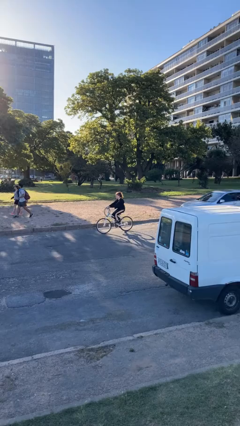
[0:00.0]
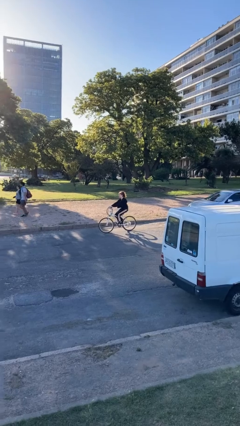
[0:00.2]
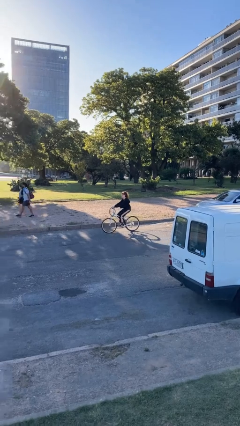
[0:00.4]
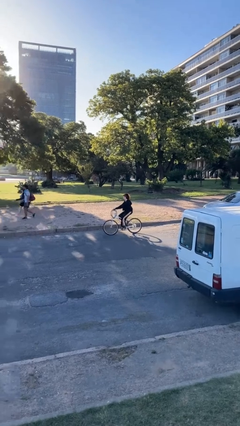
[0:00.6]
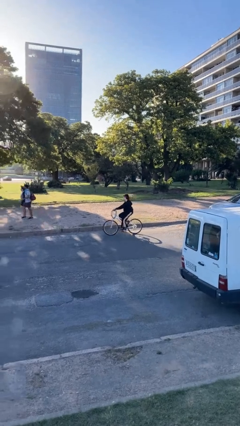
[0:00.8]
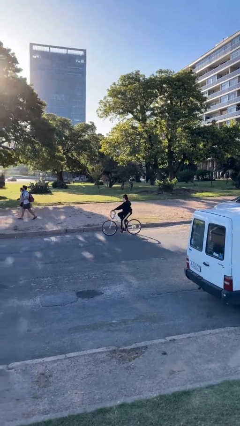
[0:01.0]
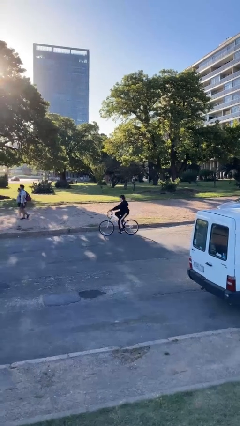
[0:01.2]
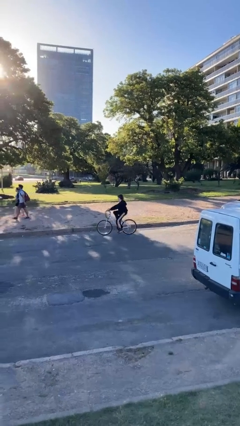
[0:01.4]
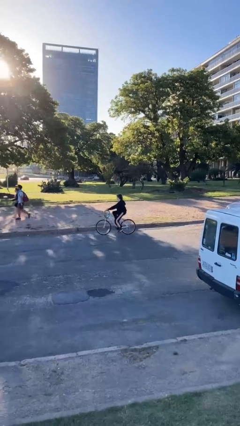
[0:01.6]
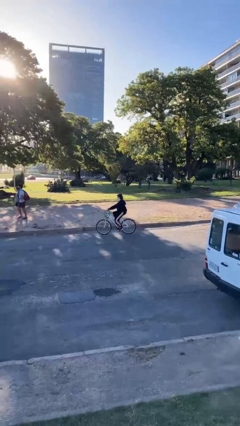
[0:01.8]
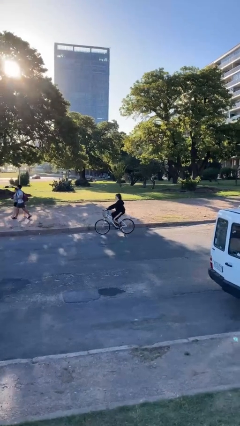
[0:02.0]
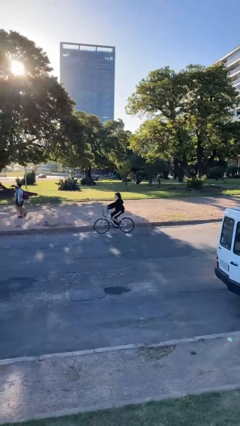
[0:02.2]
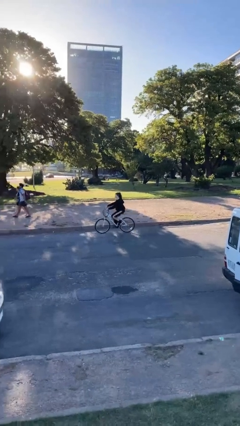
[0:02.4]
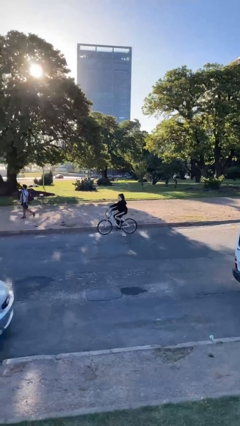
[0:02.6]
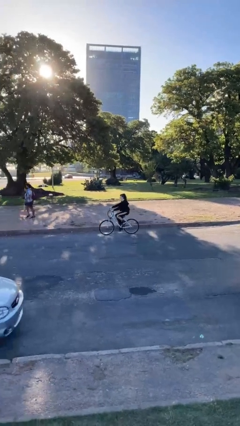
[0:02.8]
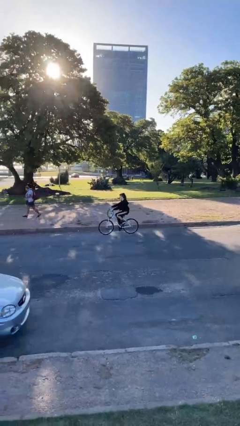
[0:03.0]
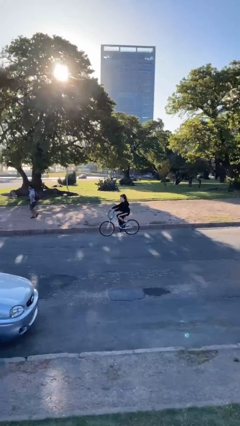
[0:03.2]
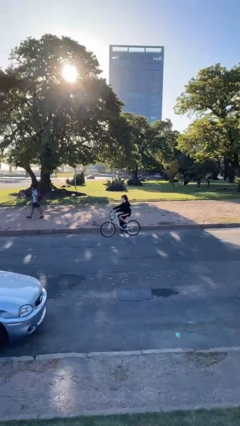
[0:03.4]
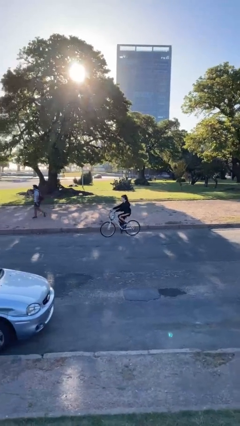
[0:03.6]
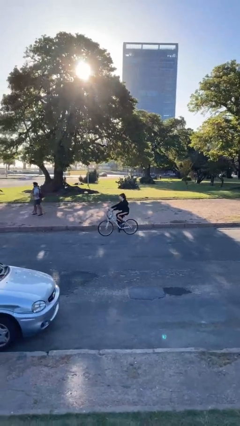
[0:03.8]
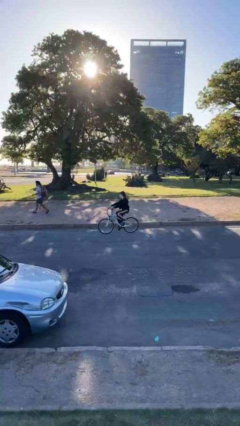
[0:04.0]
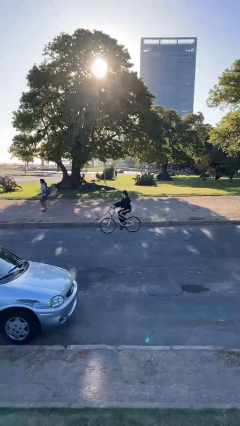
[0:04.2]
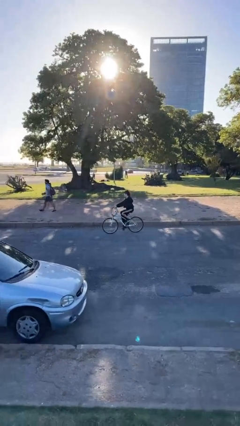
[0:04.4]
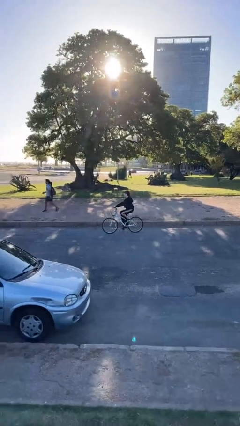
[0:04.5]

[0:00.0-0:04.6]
person rides bicycle

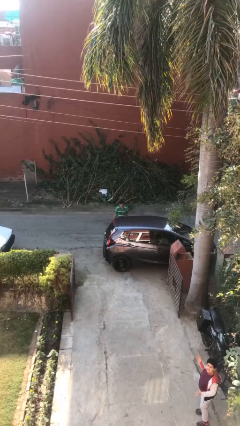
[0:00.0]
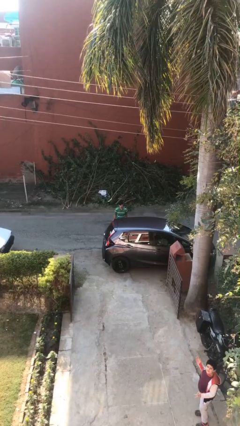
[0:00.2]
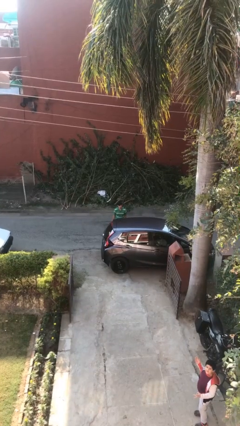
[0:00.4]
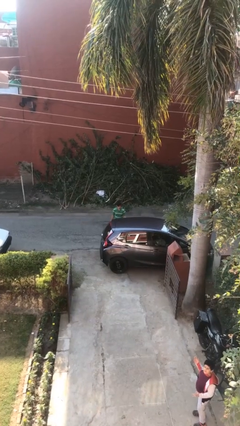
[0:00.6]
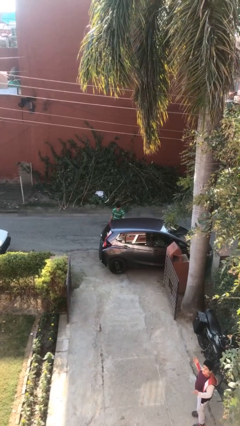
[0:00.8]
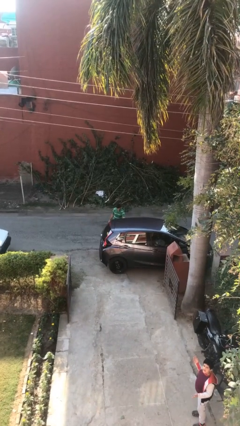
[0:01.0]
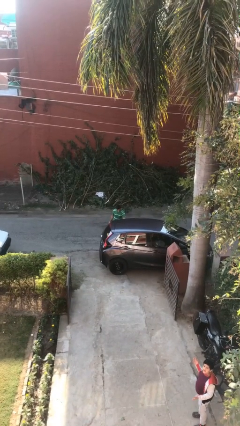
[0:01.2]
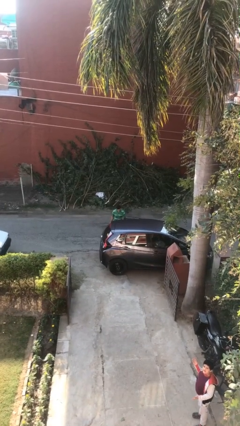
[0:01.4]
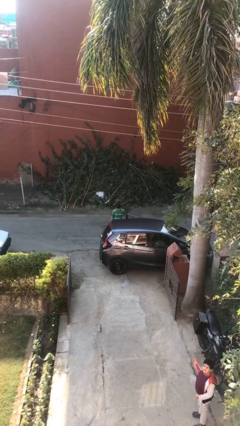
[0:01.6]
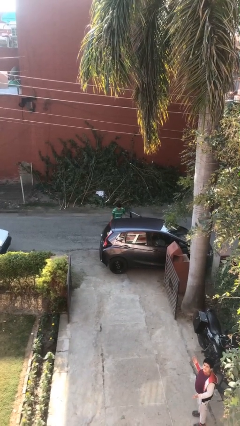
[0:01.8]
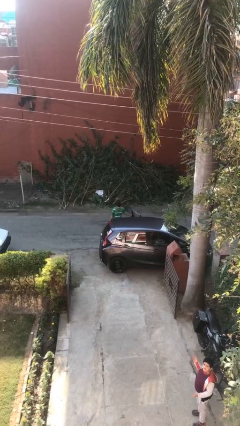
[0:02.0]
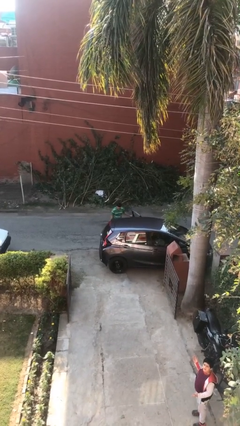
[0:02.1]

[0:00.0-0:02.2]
person opens car door

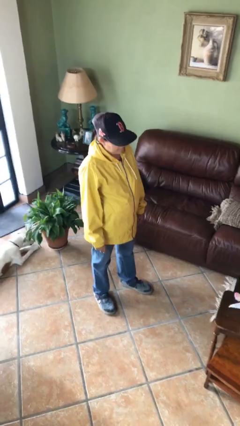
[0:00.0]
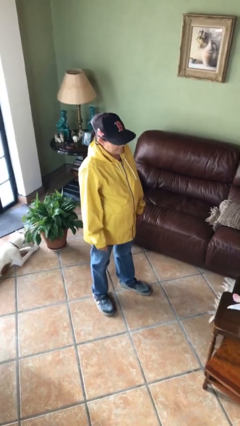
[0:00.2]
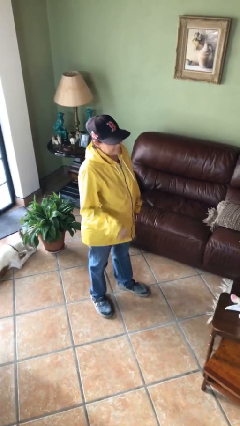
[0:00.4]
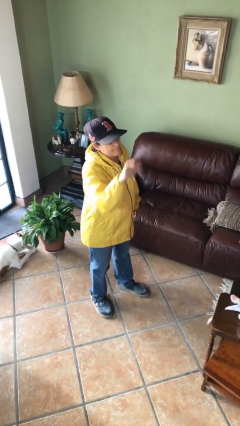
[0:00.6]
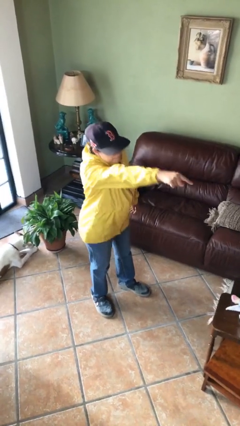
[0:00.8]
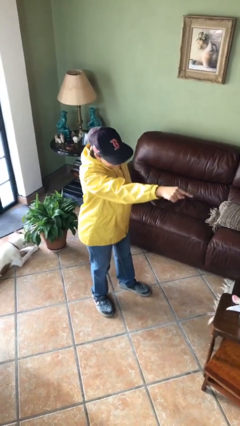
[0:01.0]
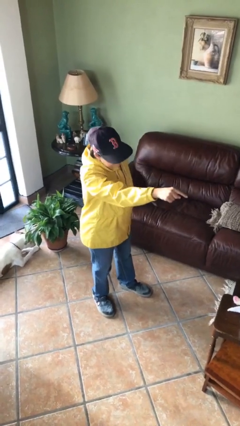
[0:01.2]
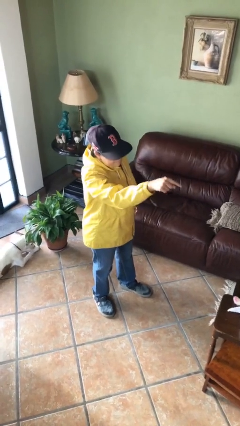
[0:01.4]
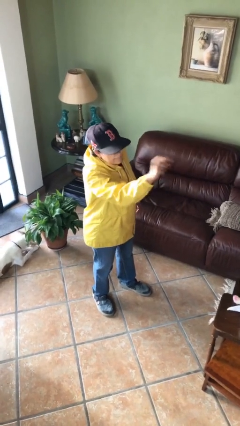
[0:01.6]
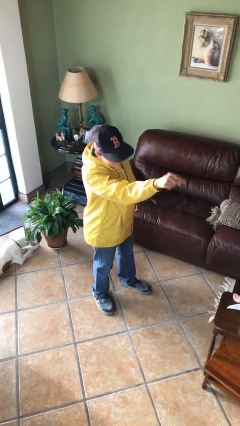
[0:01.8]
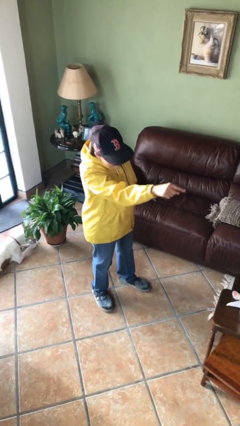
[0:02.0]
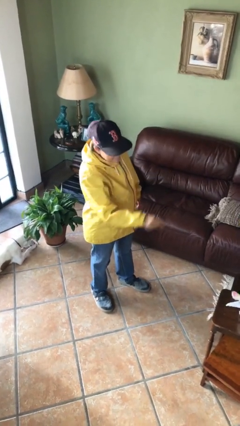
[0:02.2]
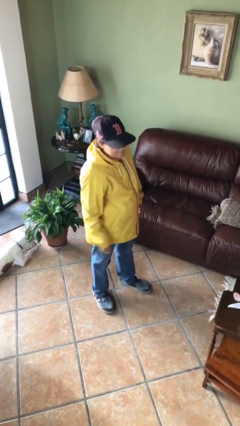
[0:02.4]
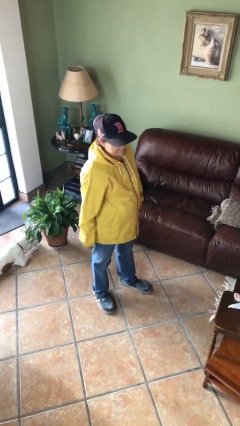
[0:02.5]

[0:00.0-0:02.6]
person points at person

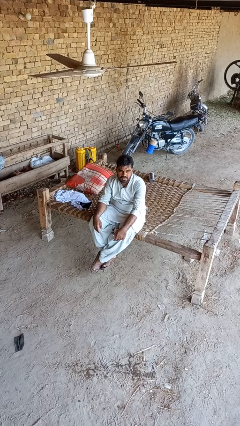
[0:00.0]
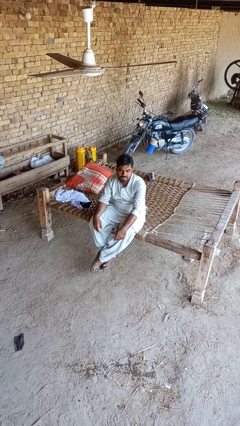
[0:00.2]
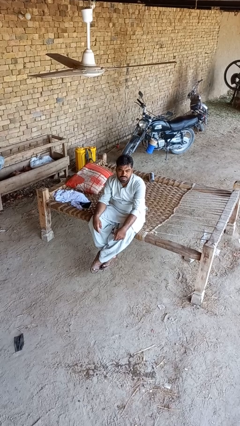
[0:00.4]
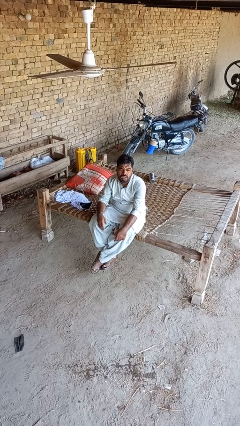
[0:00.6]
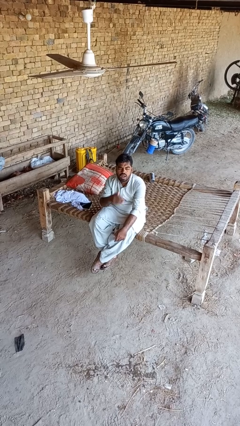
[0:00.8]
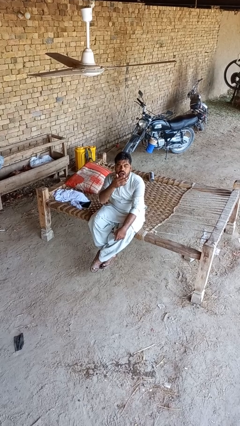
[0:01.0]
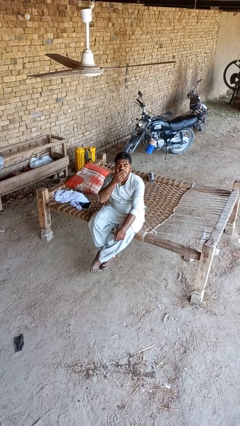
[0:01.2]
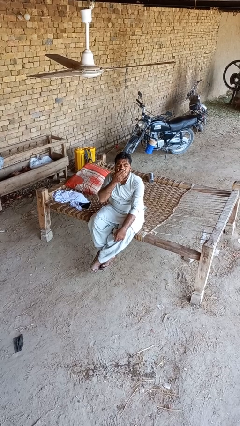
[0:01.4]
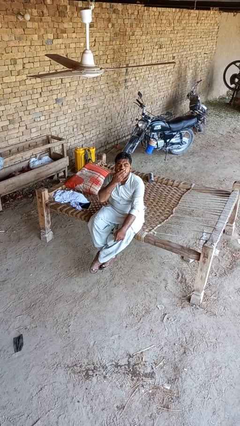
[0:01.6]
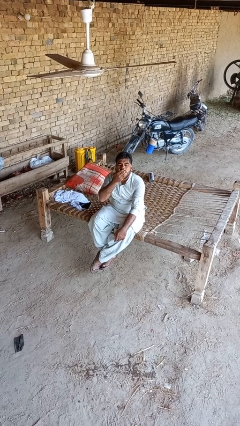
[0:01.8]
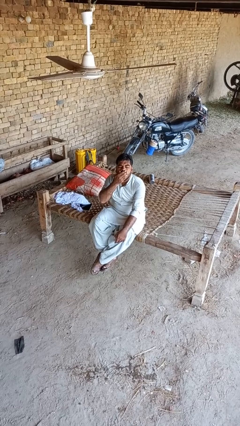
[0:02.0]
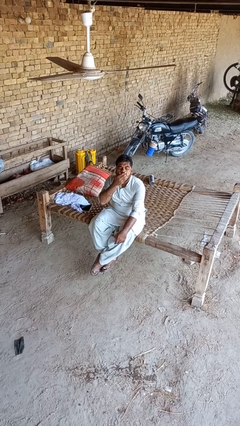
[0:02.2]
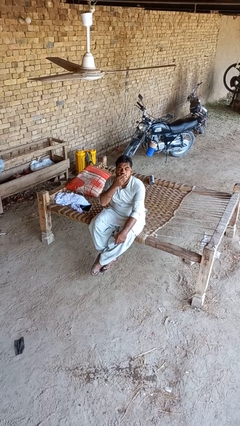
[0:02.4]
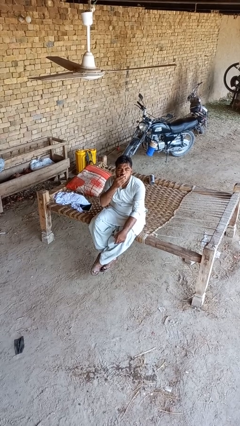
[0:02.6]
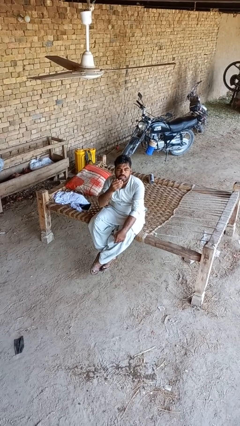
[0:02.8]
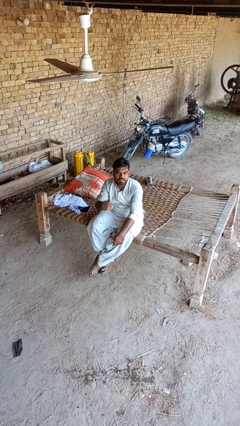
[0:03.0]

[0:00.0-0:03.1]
person yawns

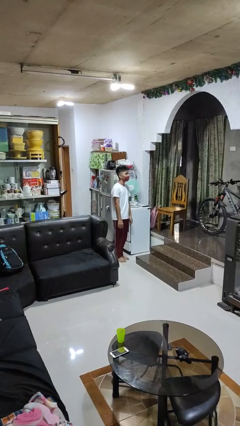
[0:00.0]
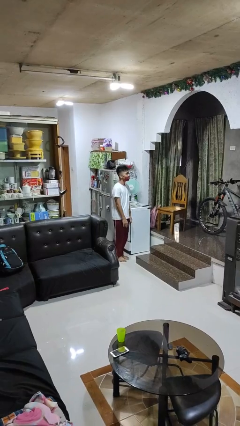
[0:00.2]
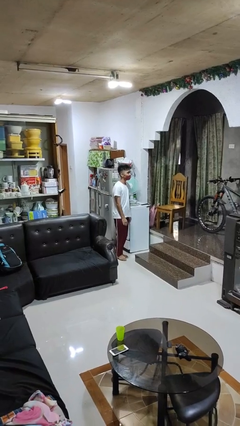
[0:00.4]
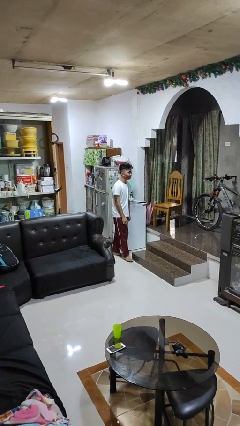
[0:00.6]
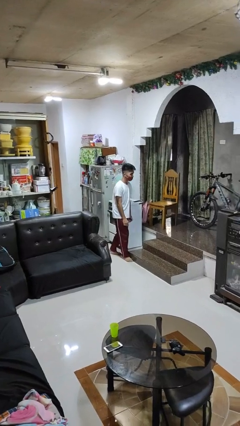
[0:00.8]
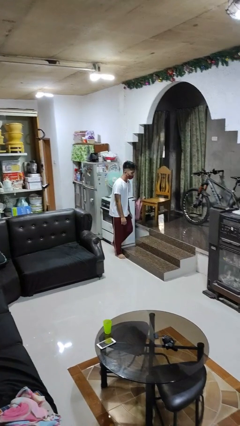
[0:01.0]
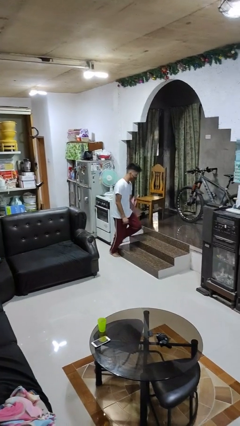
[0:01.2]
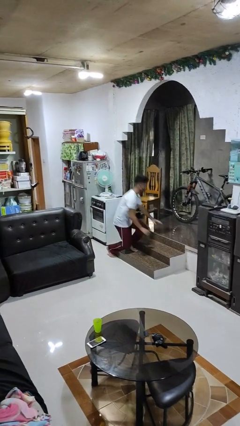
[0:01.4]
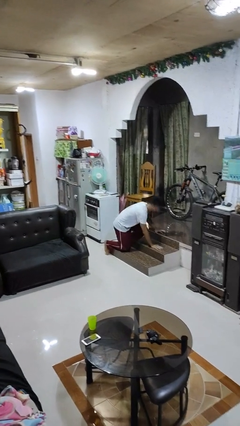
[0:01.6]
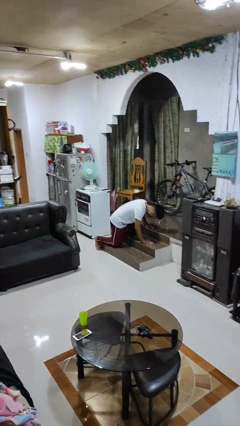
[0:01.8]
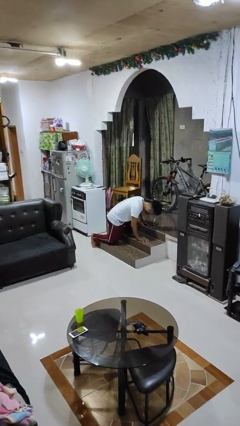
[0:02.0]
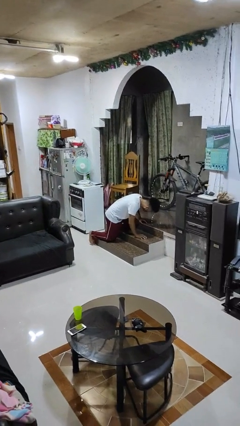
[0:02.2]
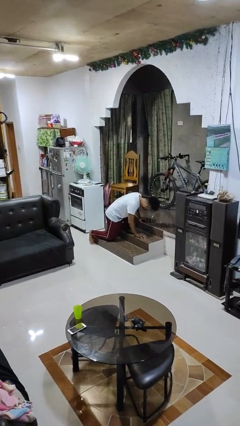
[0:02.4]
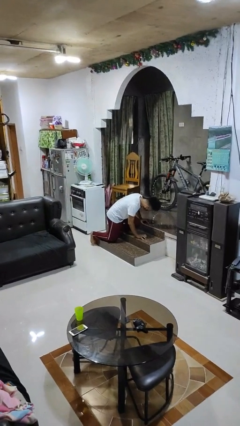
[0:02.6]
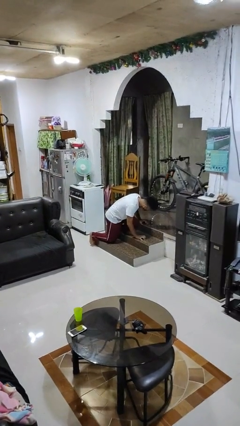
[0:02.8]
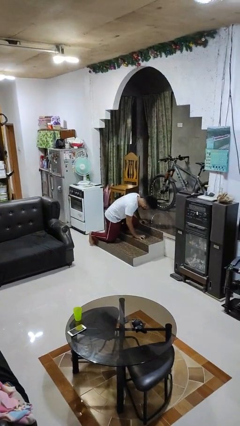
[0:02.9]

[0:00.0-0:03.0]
person trips on object on floor

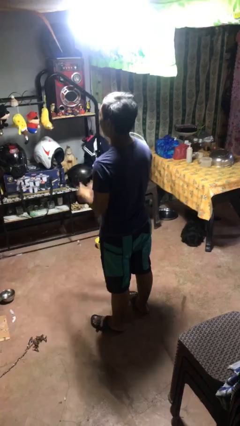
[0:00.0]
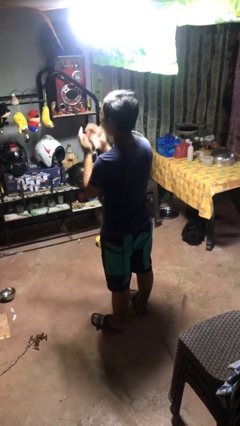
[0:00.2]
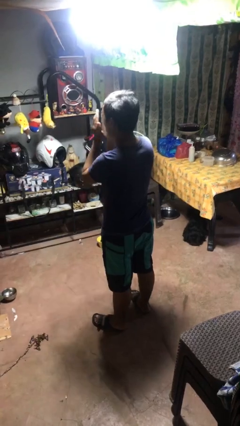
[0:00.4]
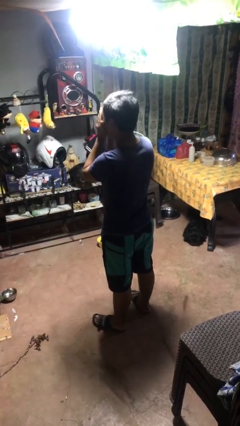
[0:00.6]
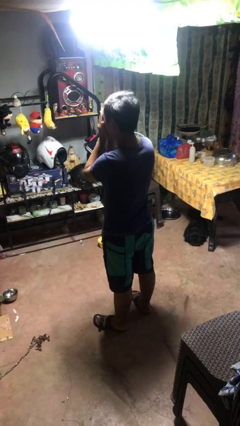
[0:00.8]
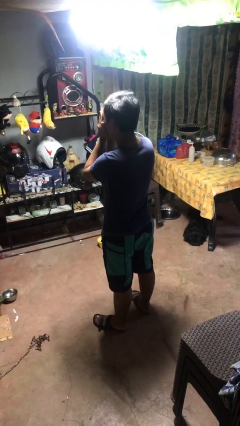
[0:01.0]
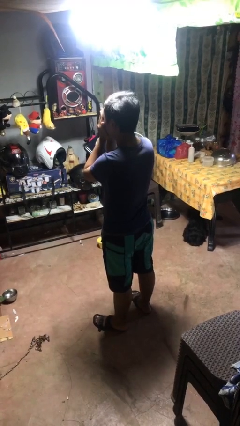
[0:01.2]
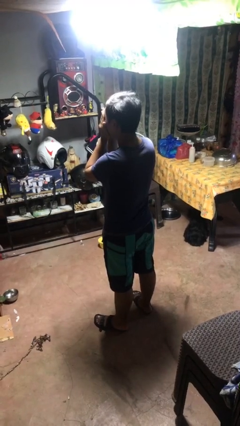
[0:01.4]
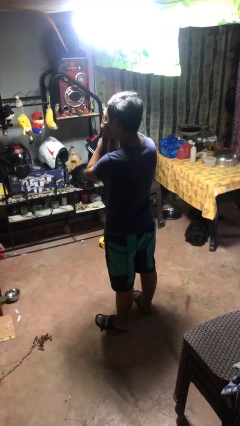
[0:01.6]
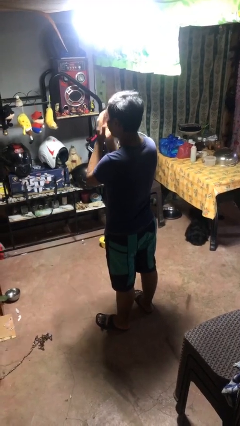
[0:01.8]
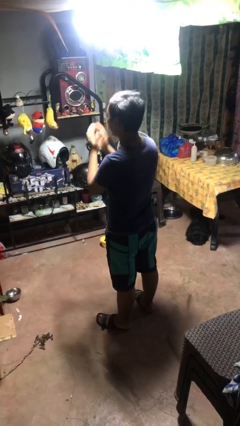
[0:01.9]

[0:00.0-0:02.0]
person covers face with hands
